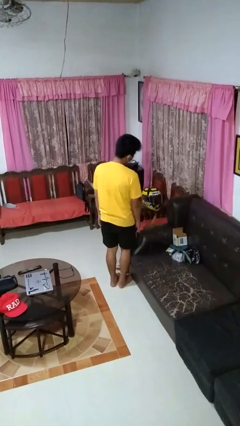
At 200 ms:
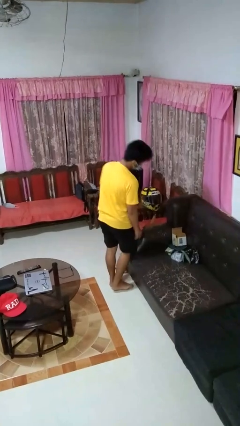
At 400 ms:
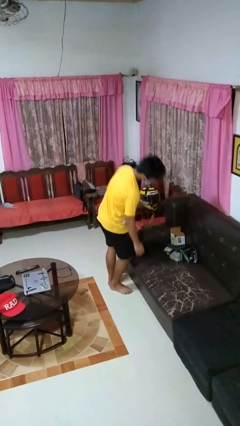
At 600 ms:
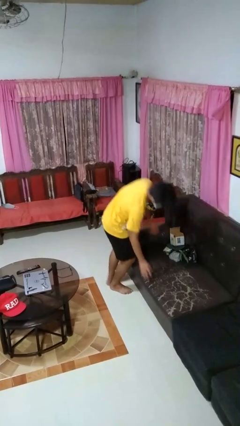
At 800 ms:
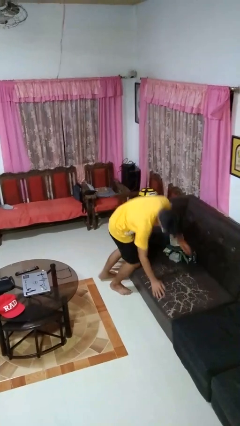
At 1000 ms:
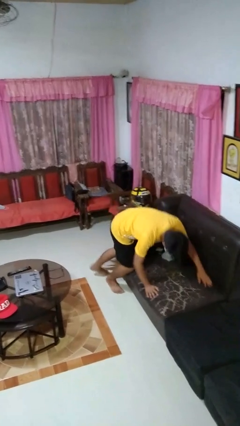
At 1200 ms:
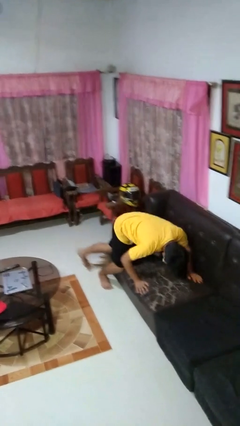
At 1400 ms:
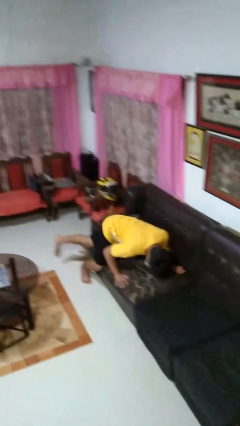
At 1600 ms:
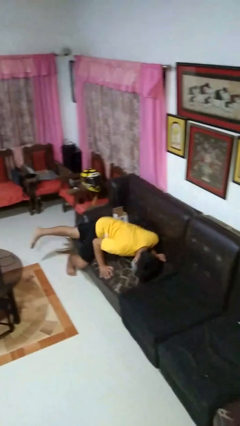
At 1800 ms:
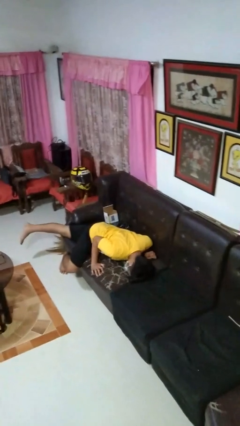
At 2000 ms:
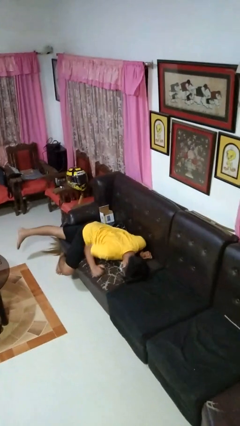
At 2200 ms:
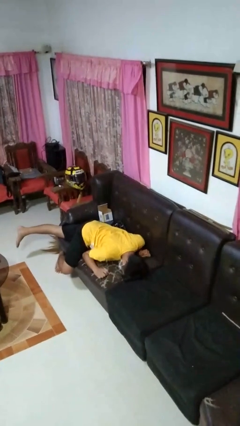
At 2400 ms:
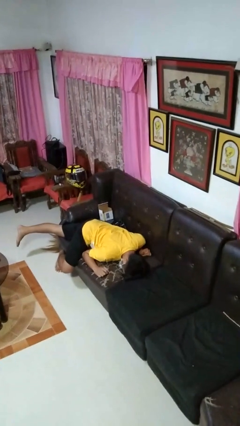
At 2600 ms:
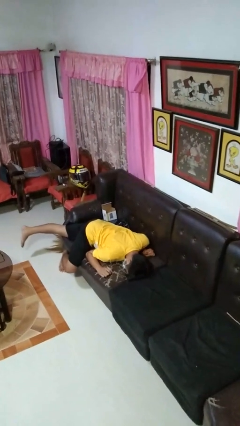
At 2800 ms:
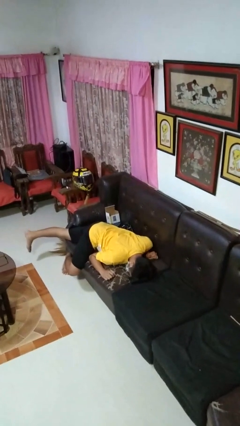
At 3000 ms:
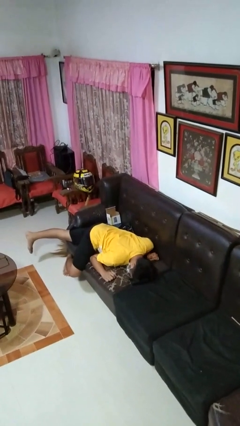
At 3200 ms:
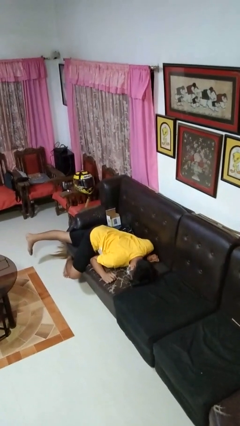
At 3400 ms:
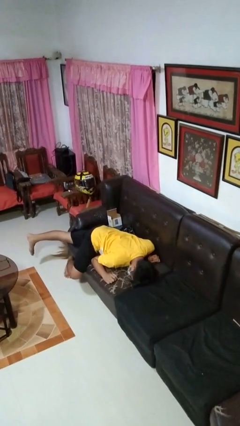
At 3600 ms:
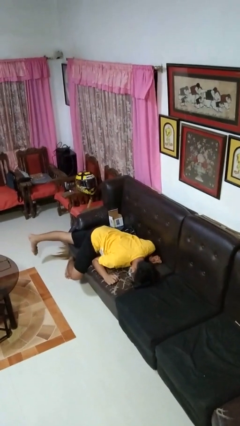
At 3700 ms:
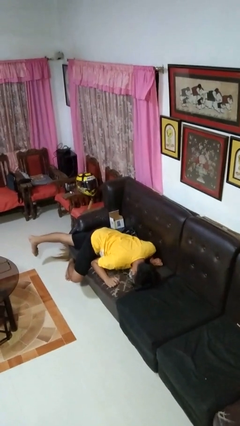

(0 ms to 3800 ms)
person lies down on couch

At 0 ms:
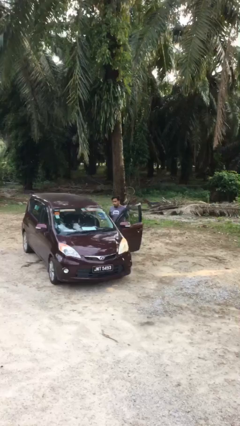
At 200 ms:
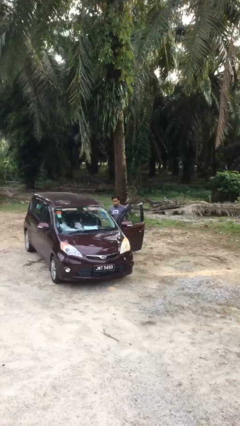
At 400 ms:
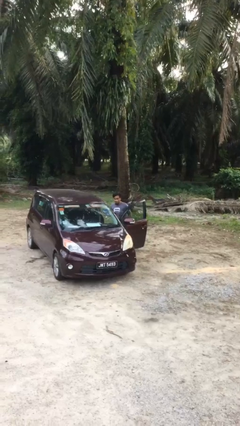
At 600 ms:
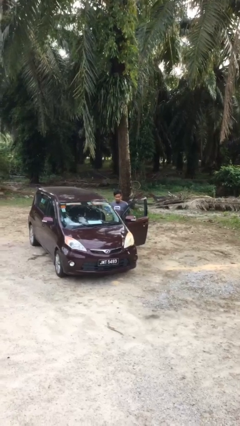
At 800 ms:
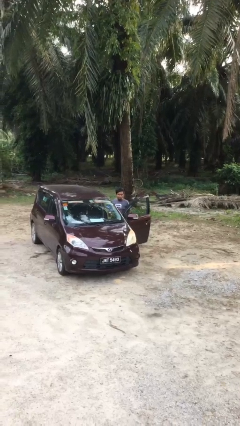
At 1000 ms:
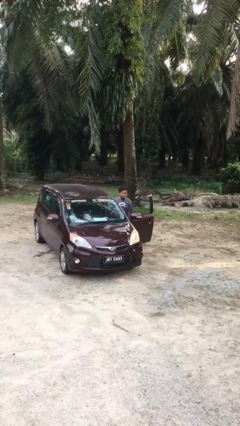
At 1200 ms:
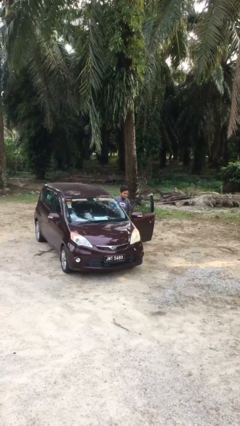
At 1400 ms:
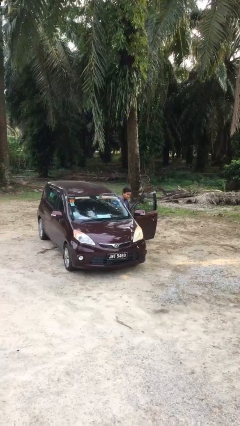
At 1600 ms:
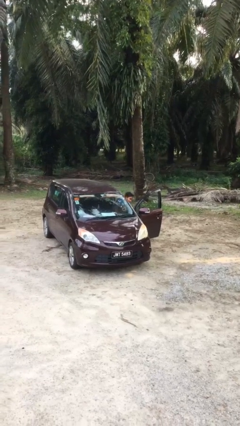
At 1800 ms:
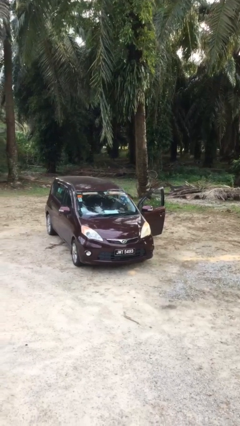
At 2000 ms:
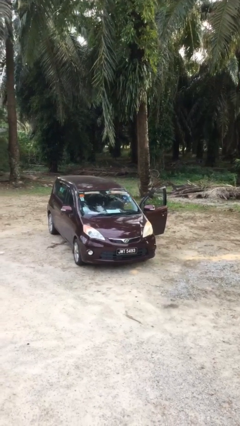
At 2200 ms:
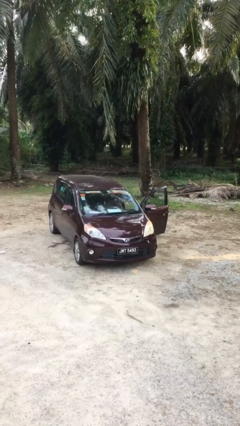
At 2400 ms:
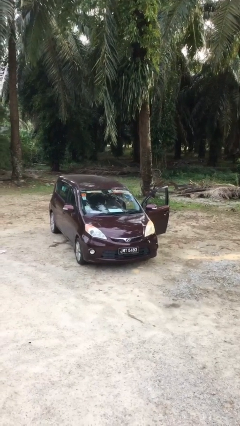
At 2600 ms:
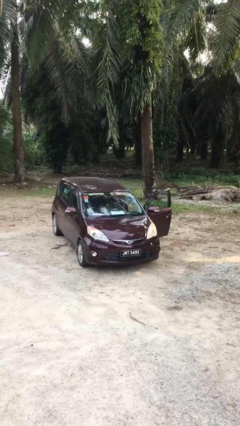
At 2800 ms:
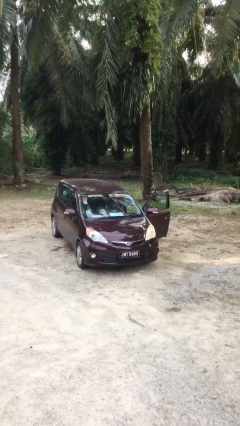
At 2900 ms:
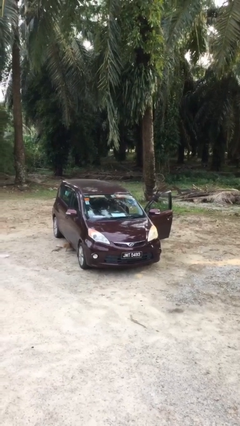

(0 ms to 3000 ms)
person enters car

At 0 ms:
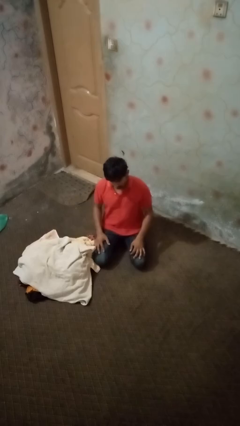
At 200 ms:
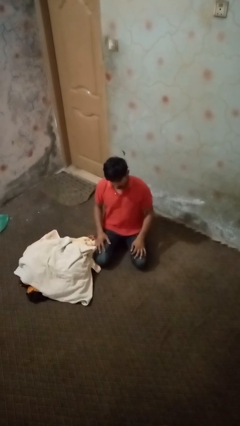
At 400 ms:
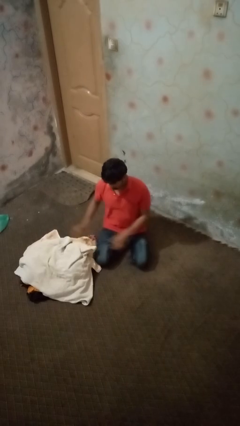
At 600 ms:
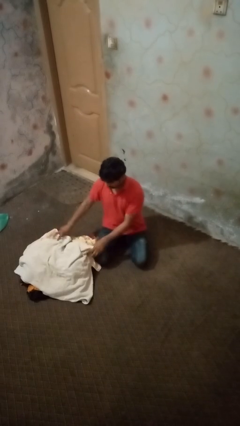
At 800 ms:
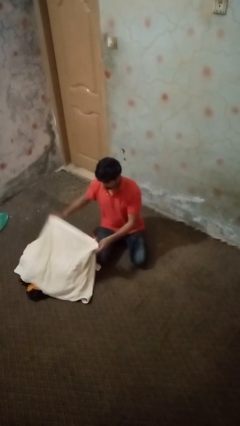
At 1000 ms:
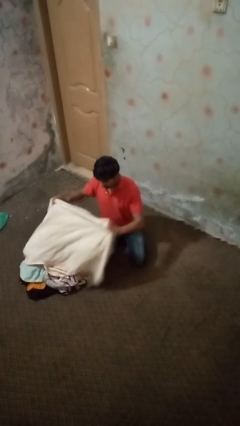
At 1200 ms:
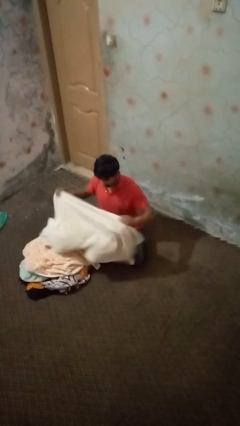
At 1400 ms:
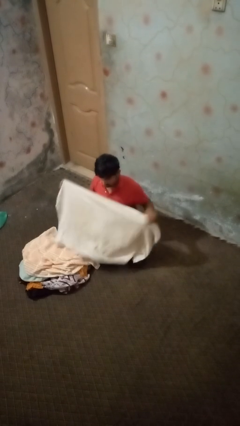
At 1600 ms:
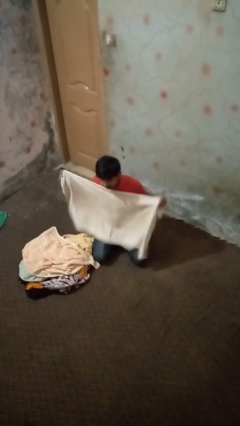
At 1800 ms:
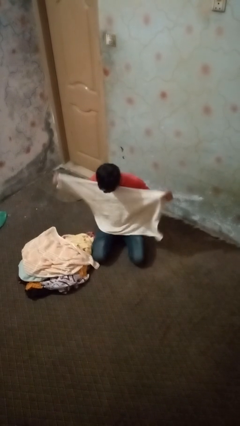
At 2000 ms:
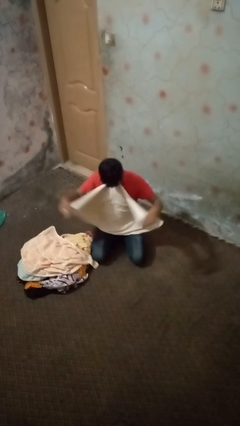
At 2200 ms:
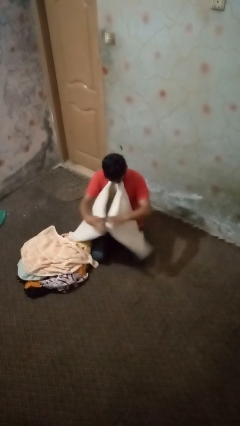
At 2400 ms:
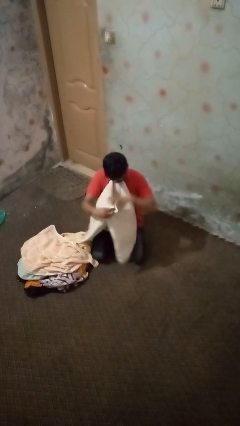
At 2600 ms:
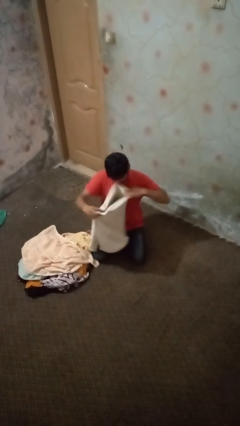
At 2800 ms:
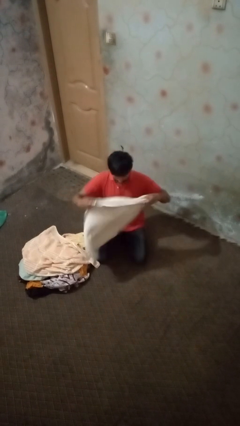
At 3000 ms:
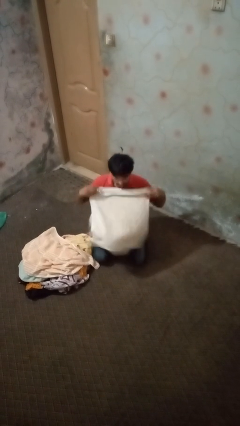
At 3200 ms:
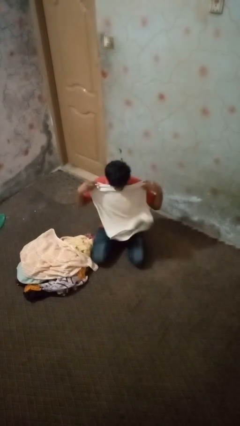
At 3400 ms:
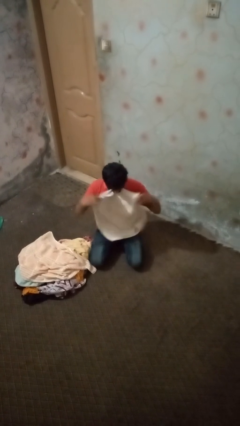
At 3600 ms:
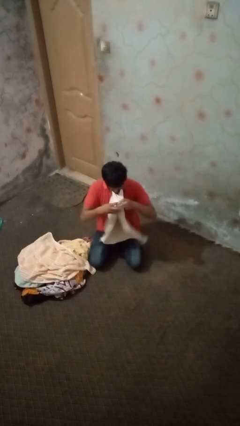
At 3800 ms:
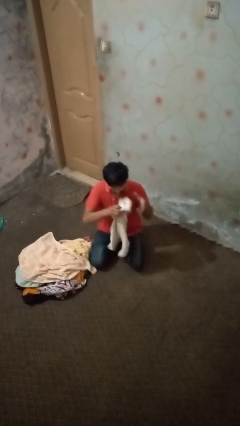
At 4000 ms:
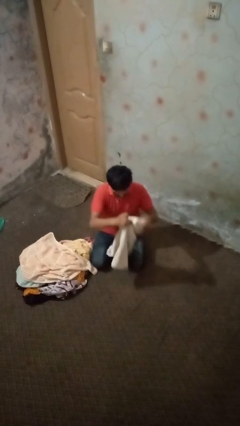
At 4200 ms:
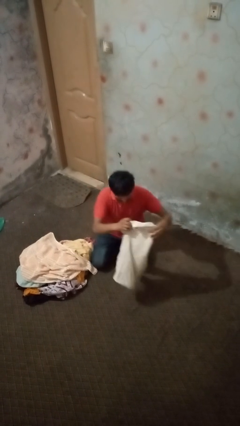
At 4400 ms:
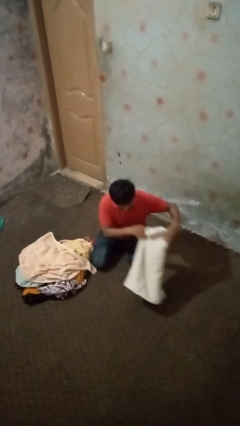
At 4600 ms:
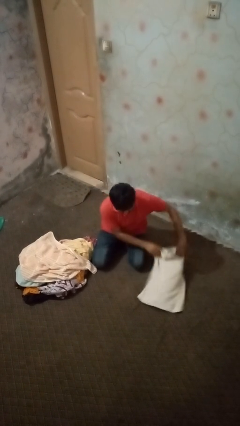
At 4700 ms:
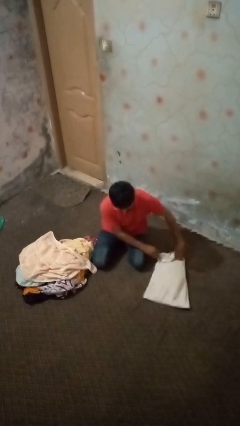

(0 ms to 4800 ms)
person folds towel

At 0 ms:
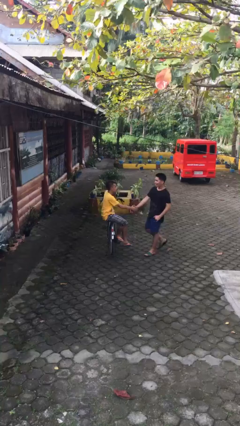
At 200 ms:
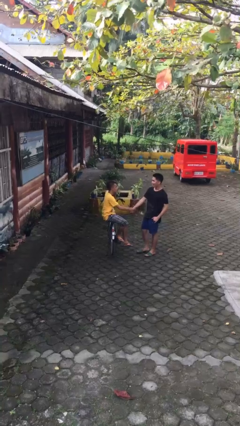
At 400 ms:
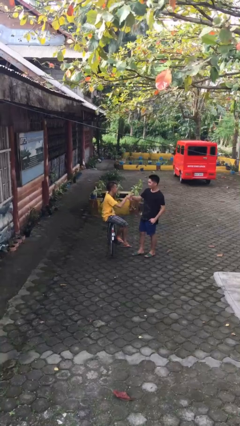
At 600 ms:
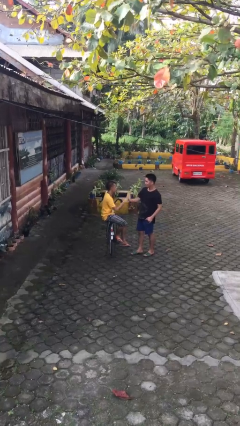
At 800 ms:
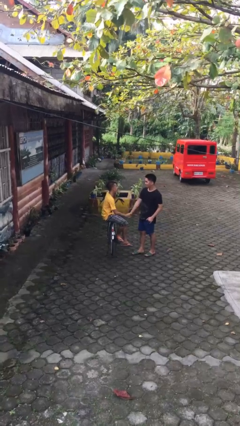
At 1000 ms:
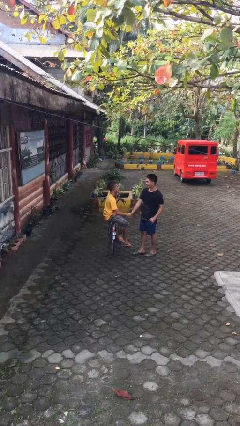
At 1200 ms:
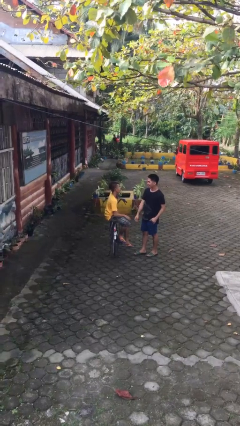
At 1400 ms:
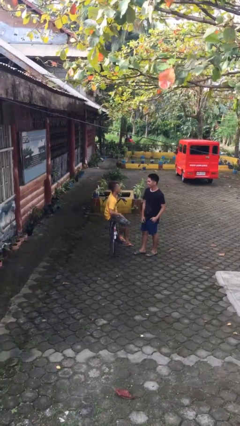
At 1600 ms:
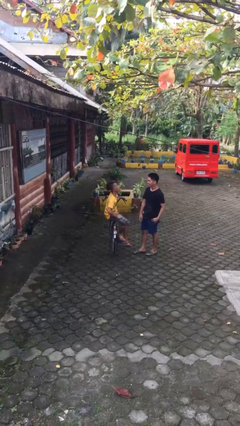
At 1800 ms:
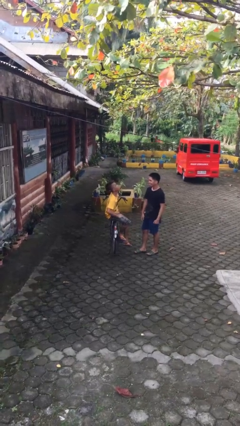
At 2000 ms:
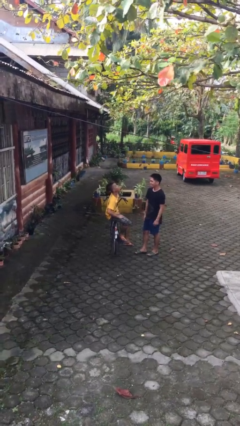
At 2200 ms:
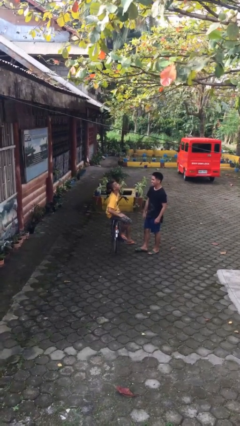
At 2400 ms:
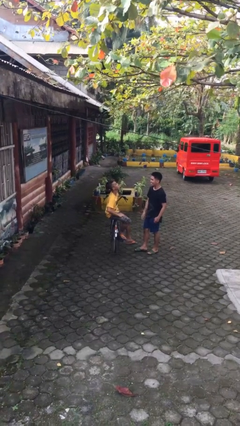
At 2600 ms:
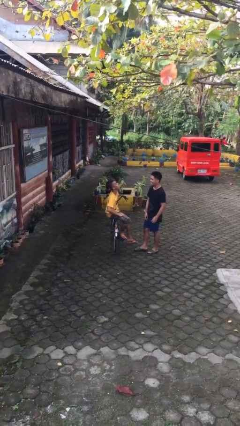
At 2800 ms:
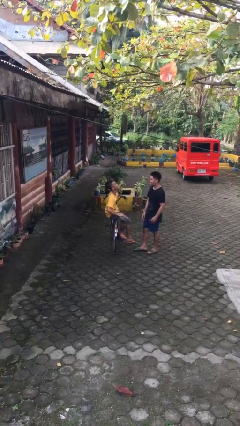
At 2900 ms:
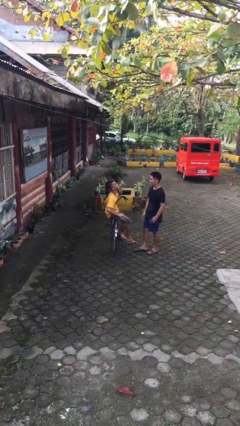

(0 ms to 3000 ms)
person shakes hand

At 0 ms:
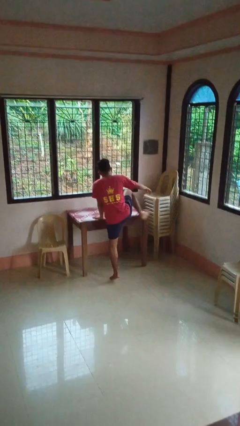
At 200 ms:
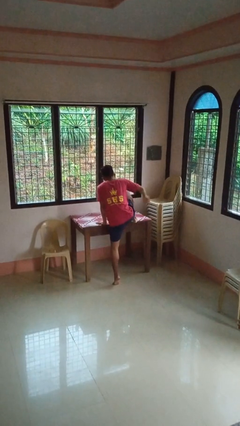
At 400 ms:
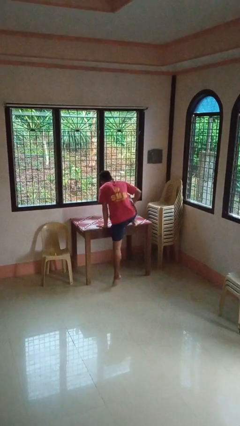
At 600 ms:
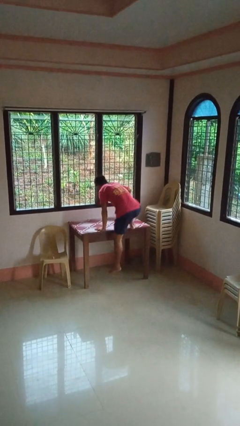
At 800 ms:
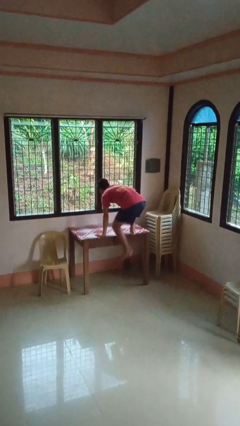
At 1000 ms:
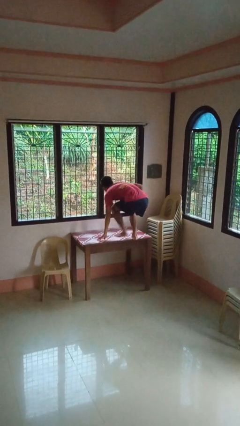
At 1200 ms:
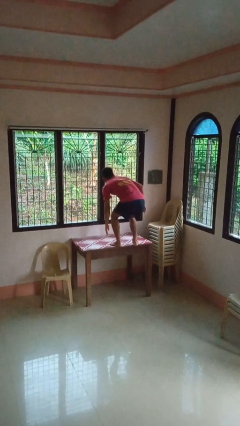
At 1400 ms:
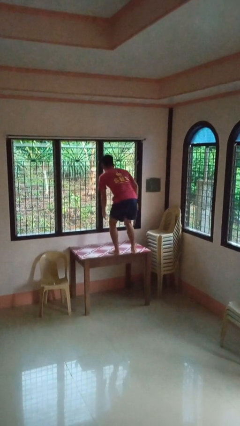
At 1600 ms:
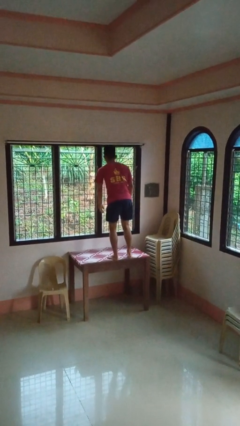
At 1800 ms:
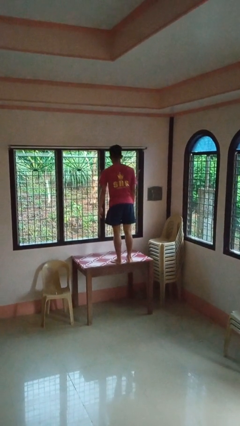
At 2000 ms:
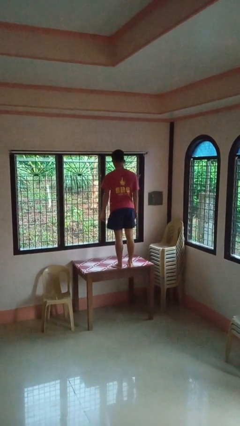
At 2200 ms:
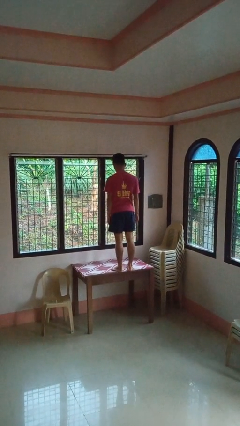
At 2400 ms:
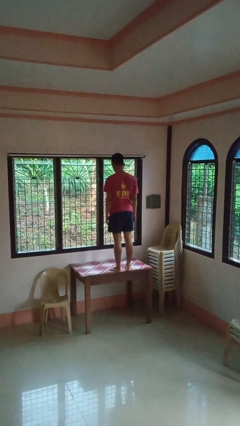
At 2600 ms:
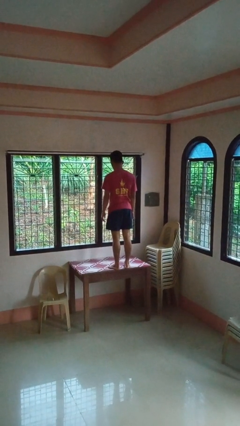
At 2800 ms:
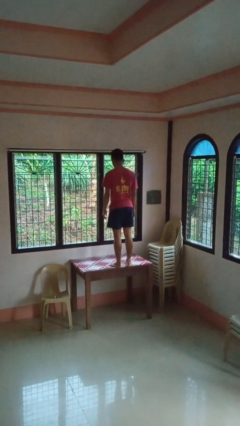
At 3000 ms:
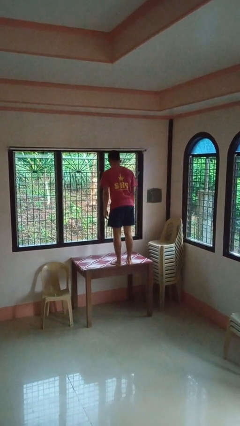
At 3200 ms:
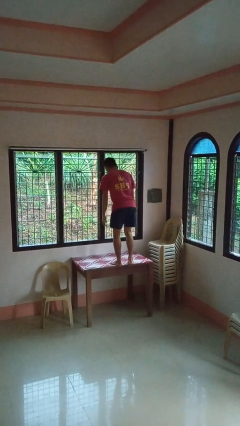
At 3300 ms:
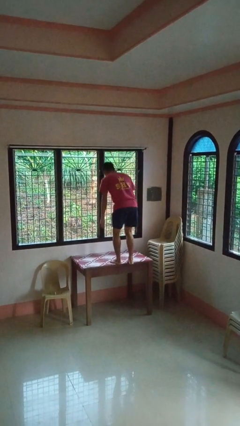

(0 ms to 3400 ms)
person climbs on table
